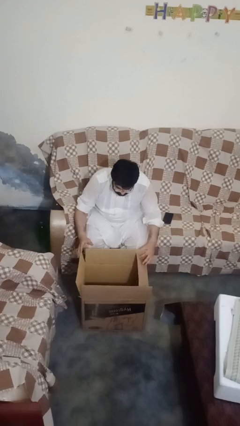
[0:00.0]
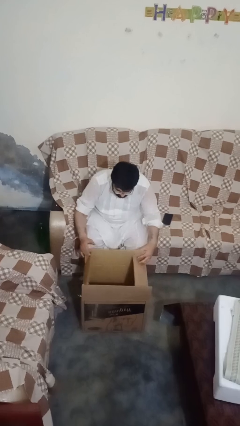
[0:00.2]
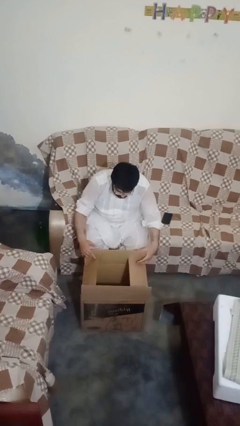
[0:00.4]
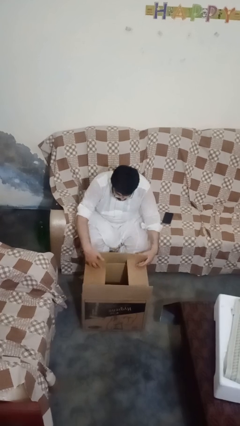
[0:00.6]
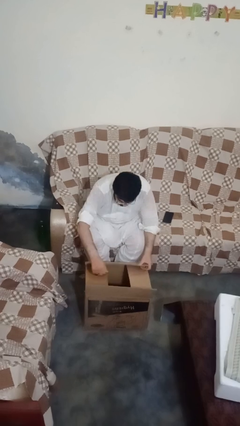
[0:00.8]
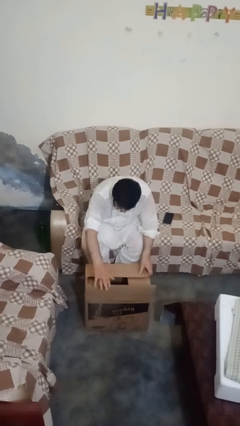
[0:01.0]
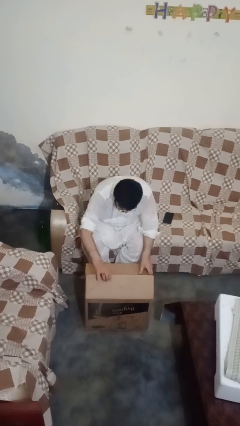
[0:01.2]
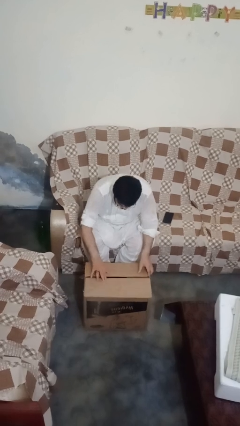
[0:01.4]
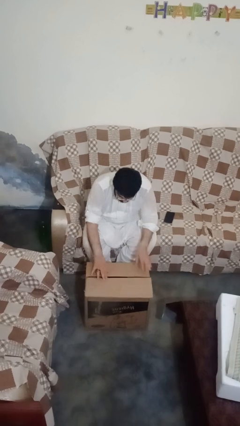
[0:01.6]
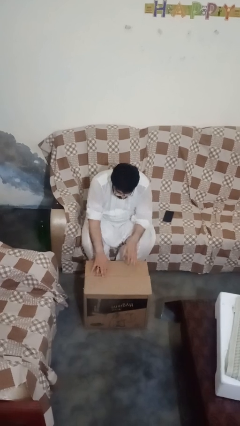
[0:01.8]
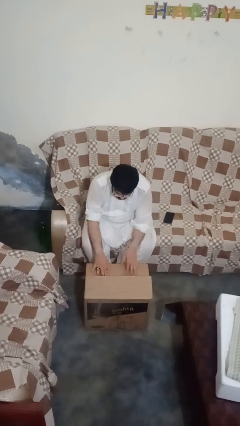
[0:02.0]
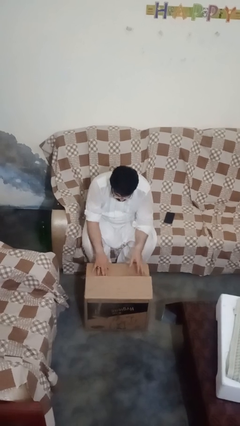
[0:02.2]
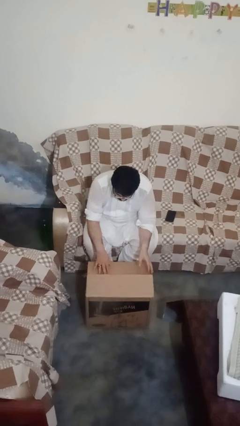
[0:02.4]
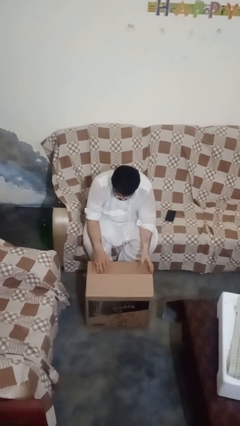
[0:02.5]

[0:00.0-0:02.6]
person closes box

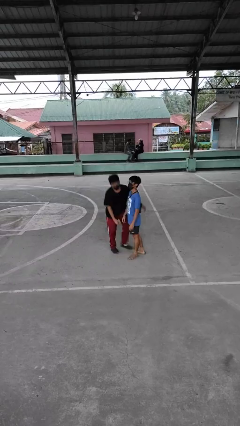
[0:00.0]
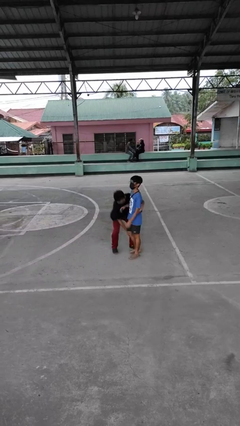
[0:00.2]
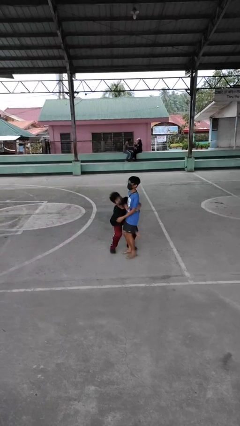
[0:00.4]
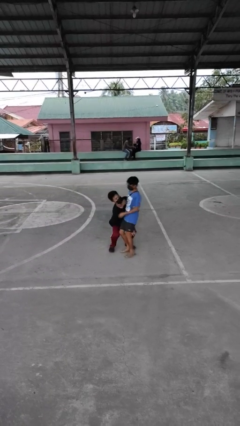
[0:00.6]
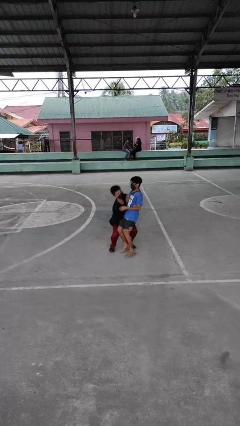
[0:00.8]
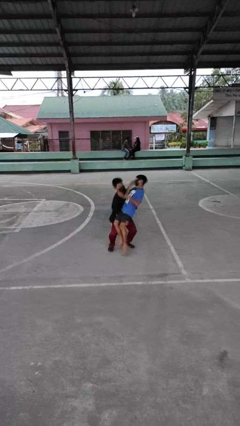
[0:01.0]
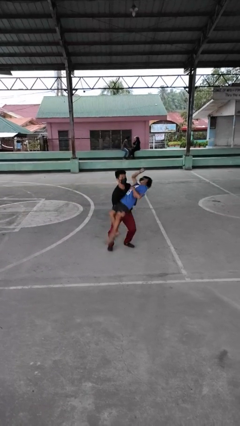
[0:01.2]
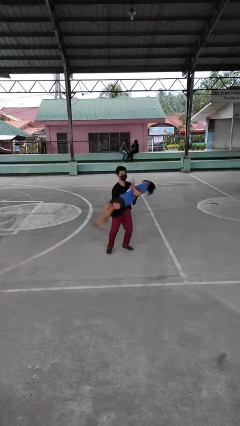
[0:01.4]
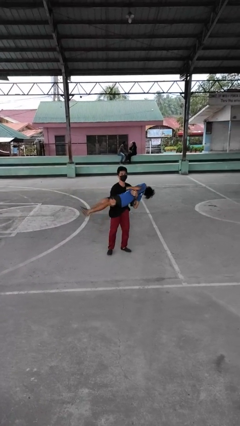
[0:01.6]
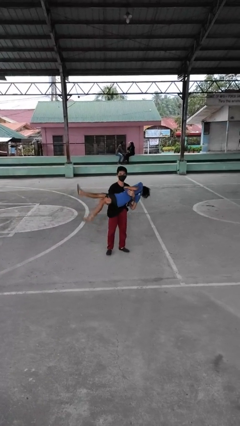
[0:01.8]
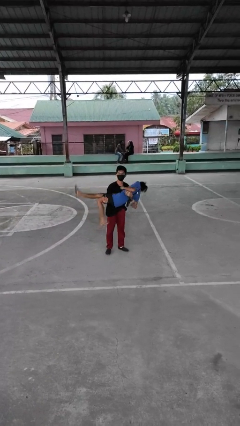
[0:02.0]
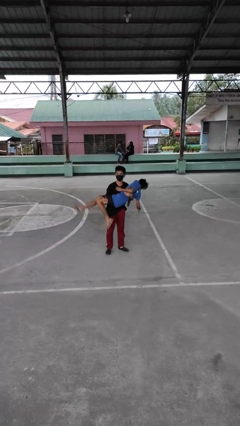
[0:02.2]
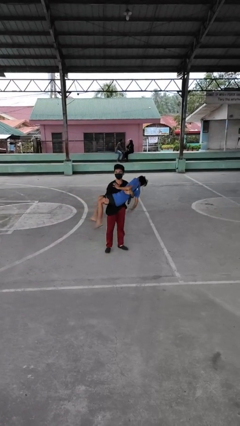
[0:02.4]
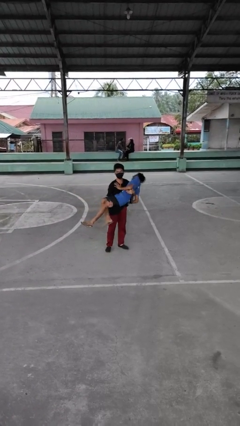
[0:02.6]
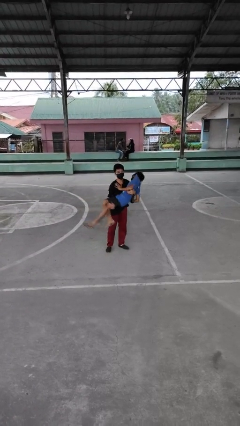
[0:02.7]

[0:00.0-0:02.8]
person picks up person

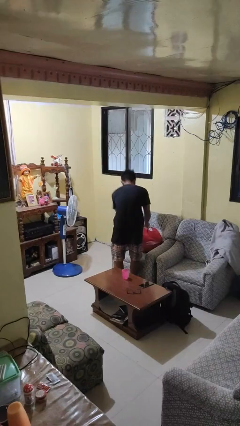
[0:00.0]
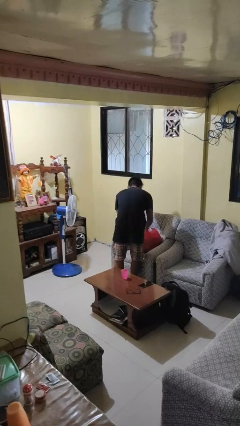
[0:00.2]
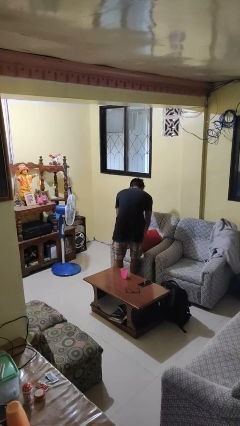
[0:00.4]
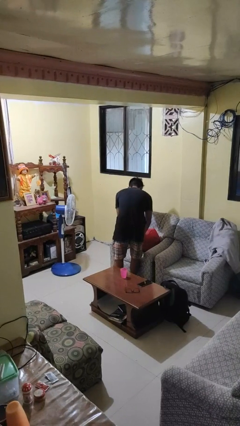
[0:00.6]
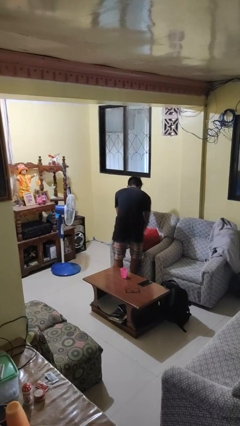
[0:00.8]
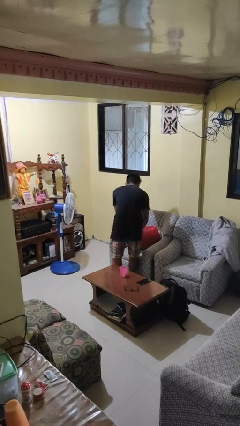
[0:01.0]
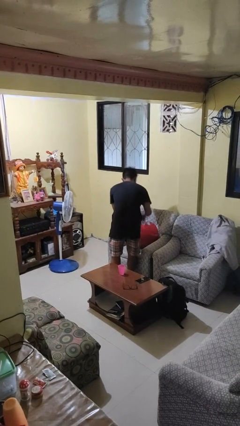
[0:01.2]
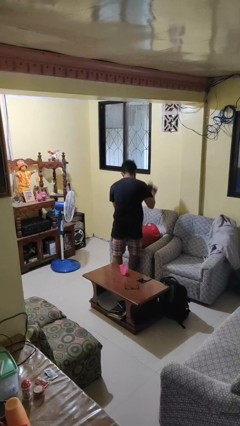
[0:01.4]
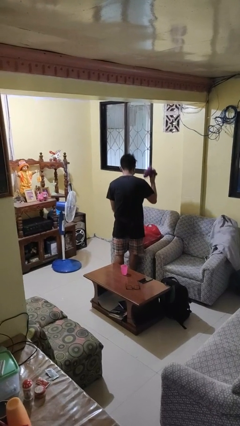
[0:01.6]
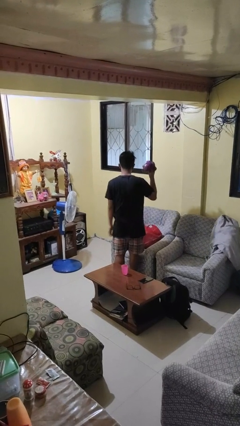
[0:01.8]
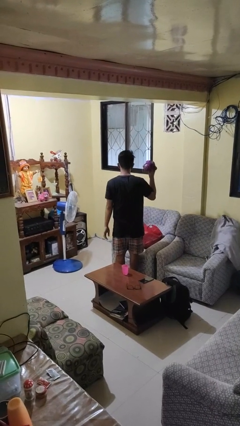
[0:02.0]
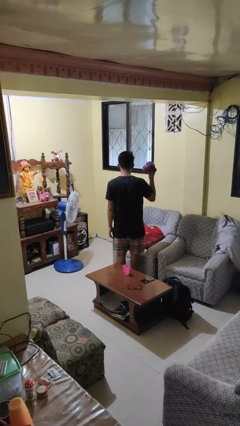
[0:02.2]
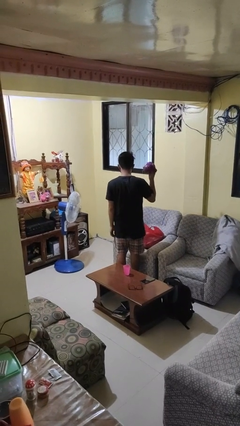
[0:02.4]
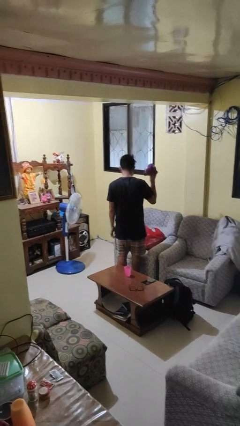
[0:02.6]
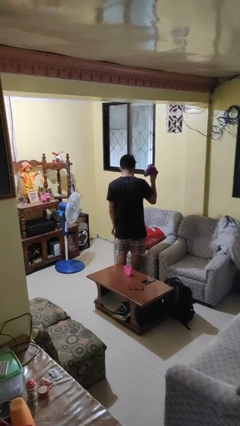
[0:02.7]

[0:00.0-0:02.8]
person takes object from bag

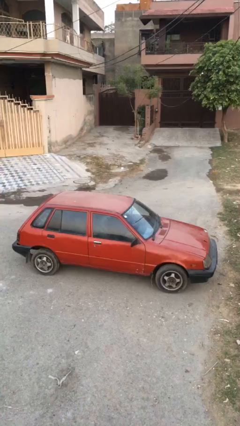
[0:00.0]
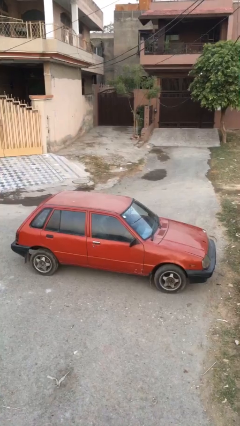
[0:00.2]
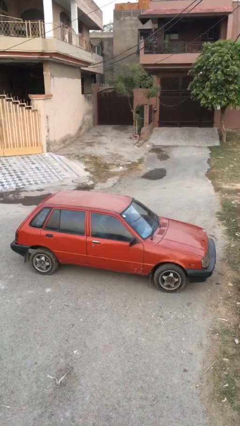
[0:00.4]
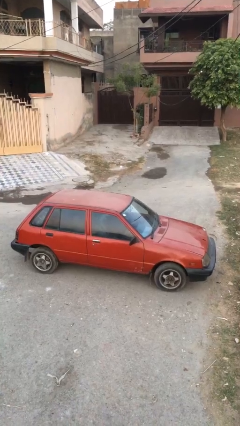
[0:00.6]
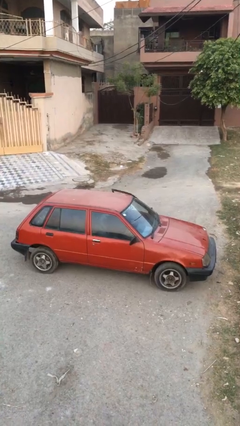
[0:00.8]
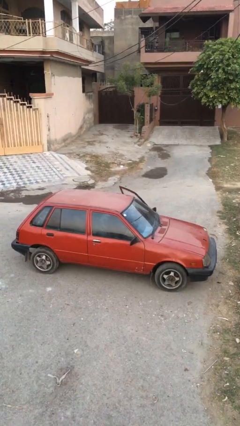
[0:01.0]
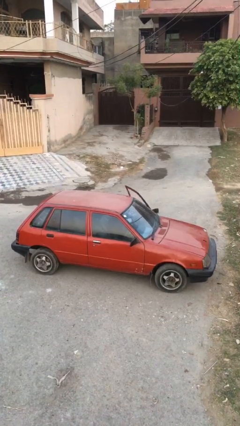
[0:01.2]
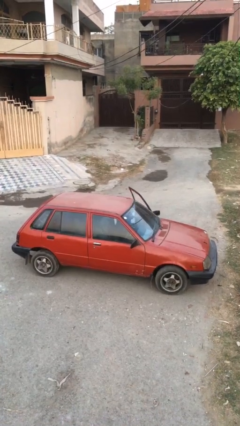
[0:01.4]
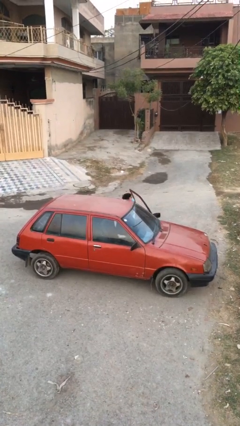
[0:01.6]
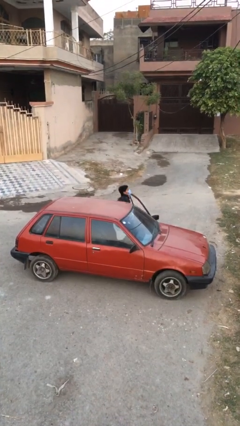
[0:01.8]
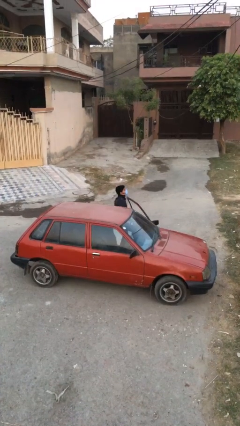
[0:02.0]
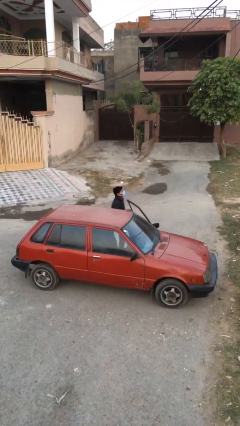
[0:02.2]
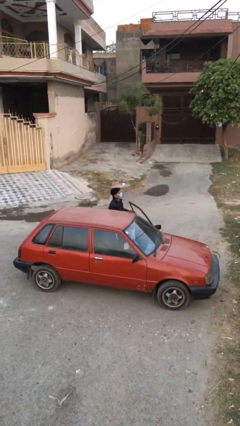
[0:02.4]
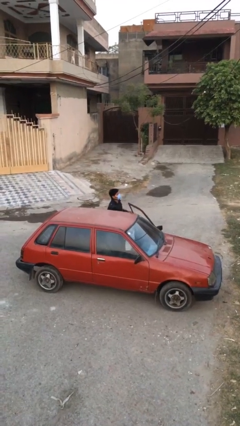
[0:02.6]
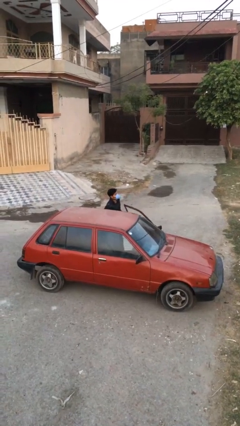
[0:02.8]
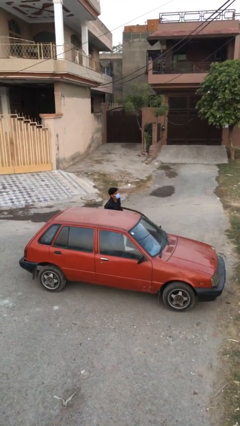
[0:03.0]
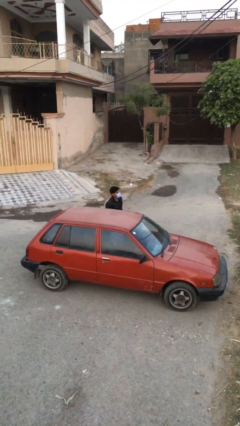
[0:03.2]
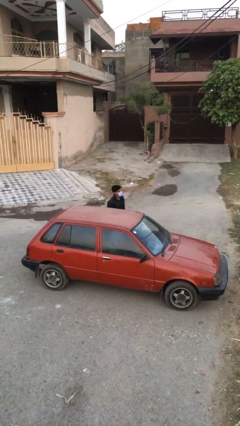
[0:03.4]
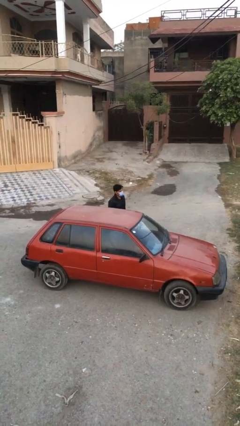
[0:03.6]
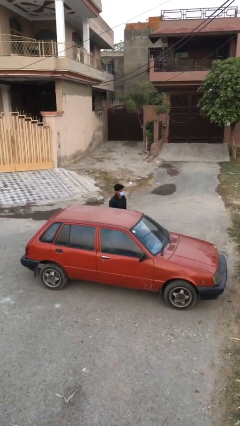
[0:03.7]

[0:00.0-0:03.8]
person exits car

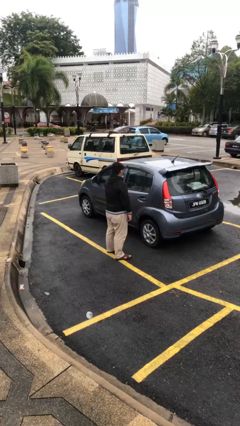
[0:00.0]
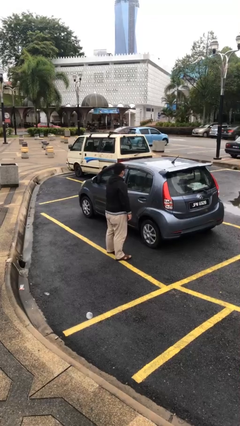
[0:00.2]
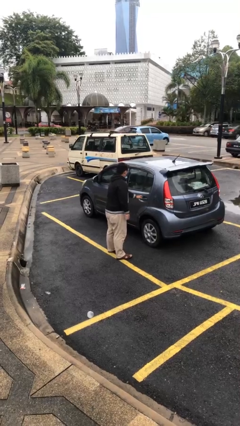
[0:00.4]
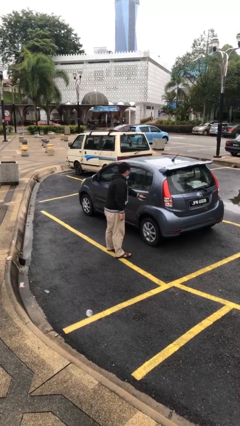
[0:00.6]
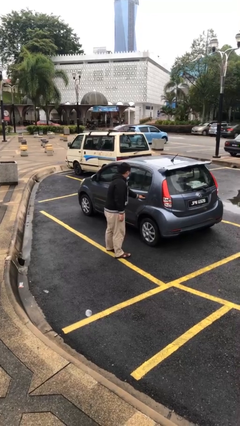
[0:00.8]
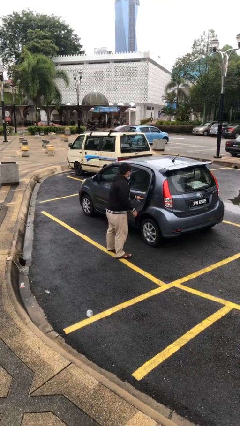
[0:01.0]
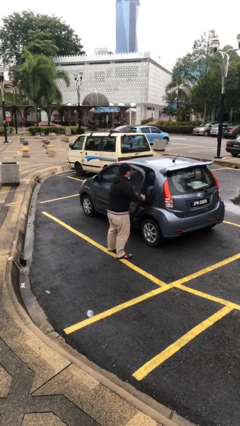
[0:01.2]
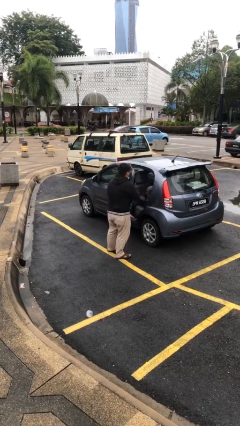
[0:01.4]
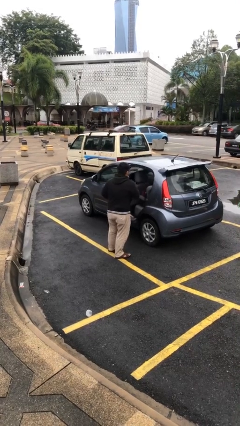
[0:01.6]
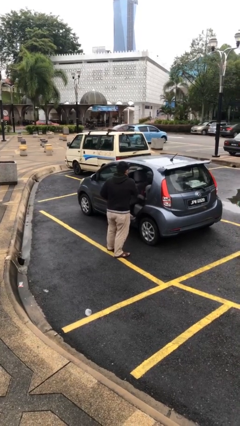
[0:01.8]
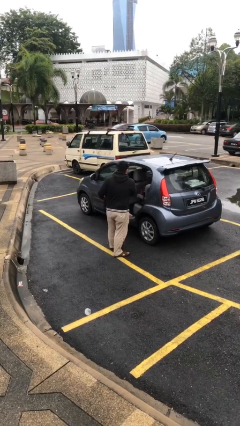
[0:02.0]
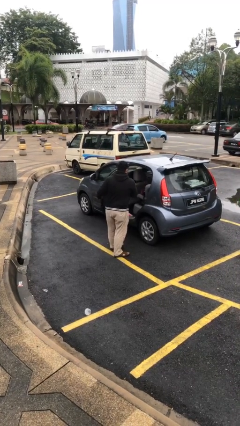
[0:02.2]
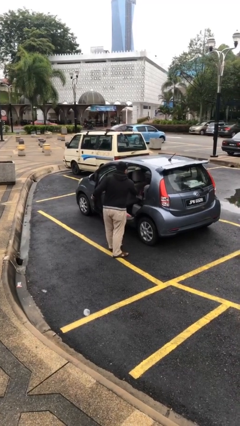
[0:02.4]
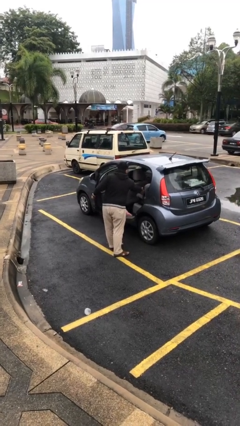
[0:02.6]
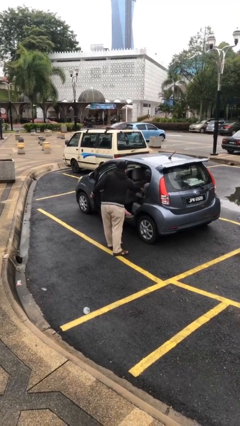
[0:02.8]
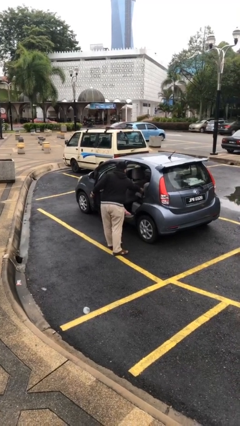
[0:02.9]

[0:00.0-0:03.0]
person opens car door

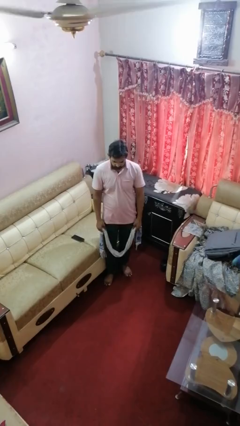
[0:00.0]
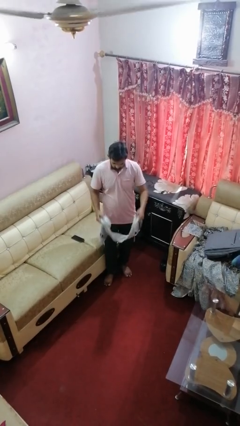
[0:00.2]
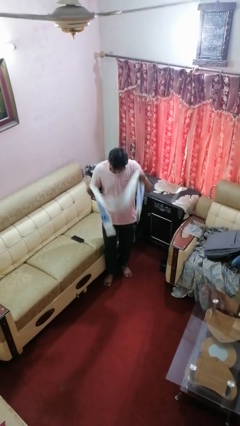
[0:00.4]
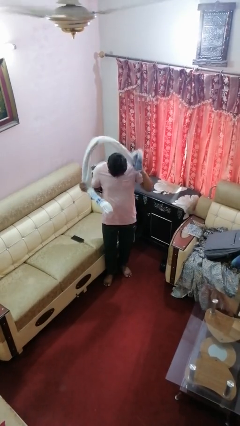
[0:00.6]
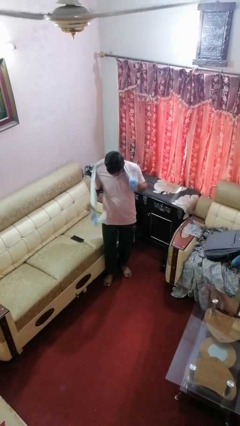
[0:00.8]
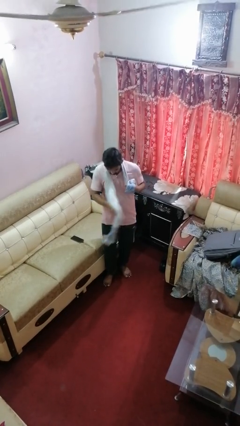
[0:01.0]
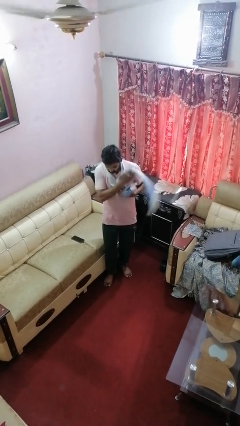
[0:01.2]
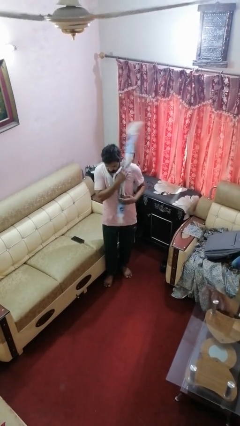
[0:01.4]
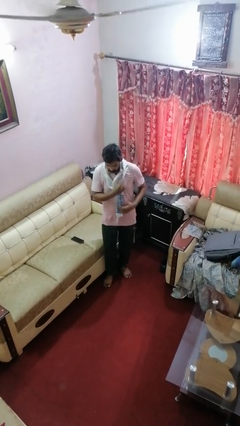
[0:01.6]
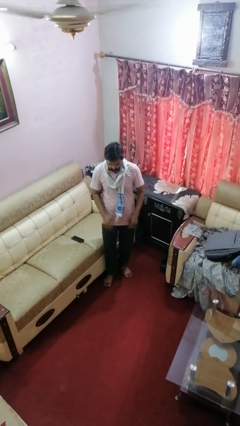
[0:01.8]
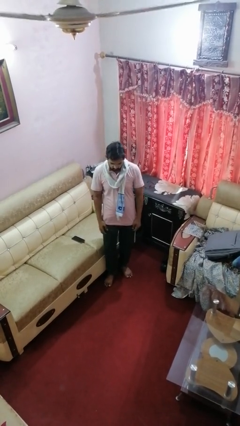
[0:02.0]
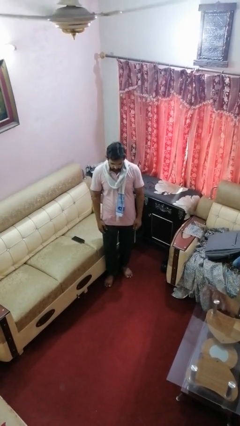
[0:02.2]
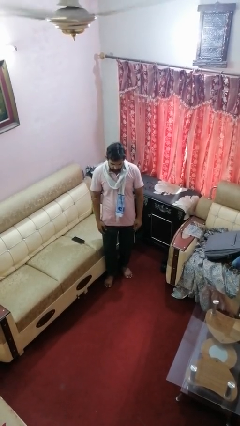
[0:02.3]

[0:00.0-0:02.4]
person puts on scarf
